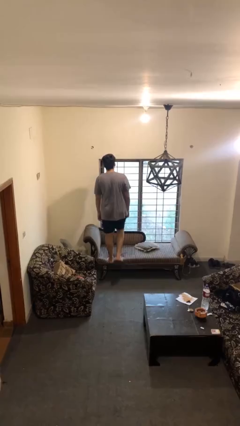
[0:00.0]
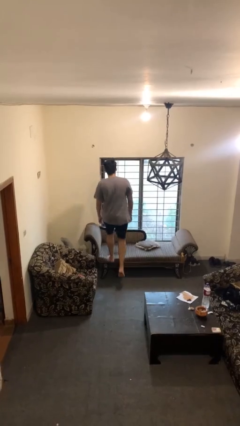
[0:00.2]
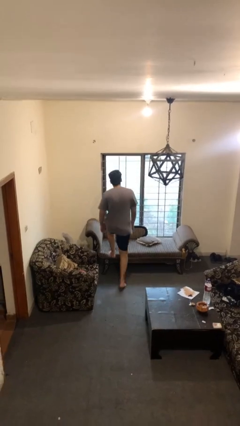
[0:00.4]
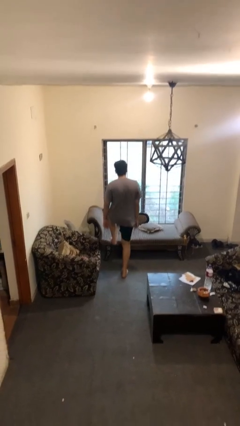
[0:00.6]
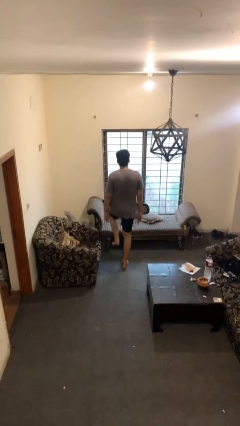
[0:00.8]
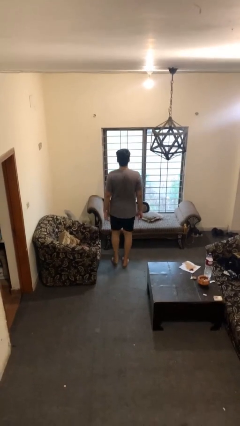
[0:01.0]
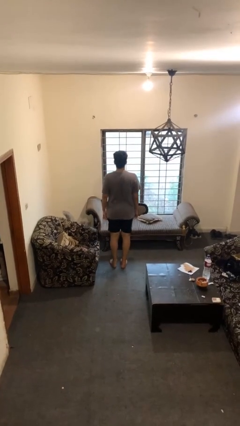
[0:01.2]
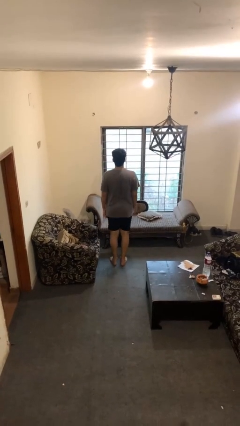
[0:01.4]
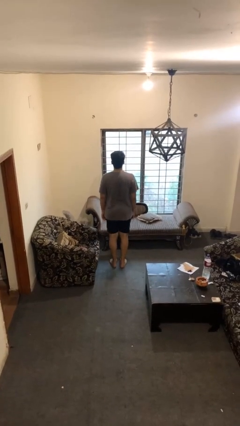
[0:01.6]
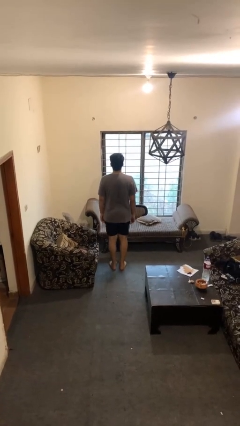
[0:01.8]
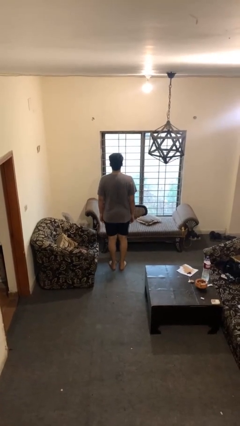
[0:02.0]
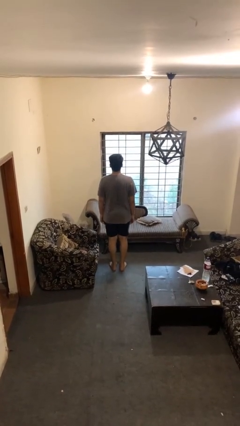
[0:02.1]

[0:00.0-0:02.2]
person climbs off couch

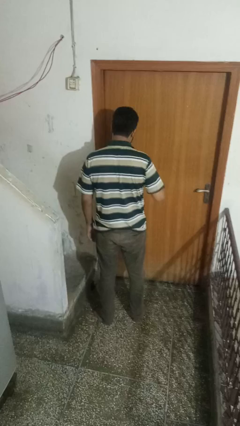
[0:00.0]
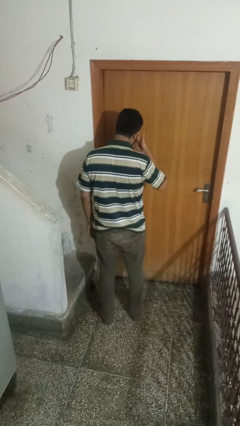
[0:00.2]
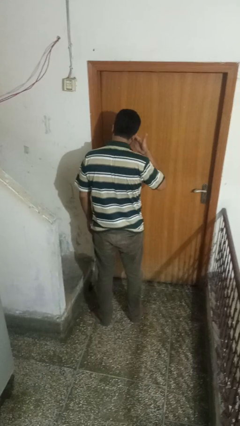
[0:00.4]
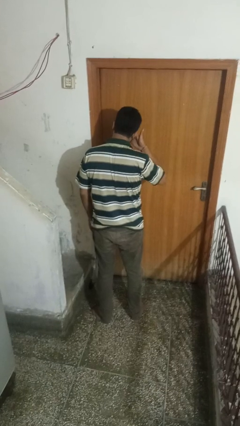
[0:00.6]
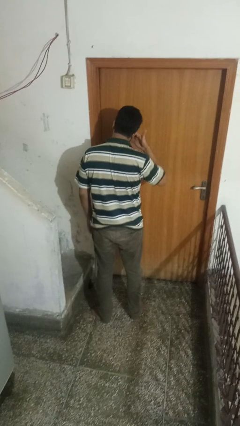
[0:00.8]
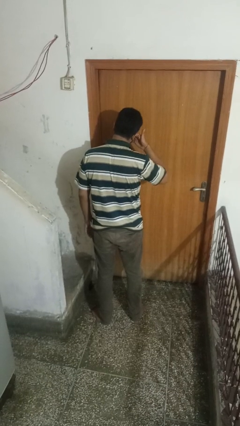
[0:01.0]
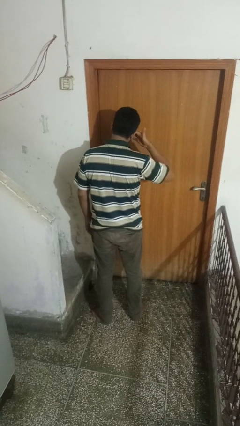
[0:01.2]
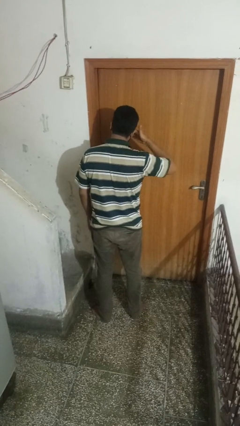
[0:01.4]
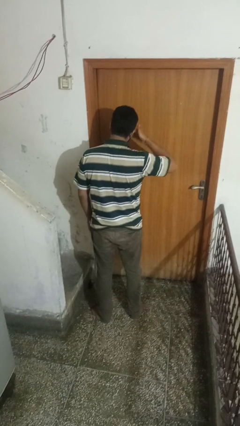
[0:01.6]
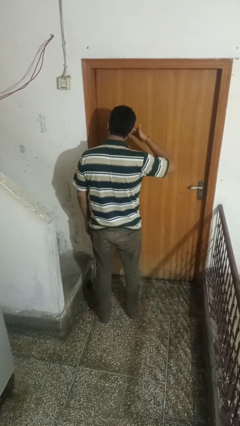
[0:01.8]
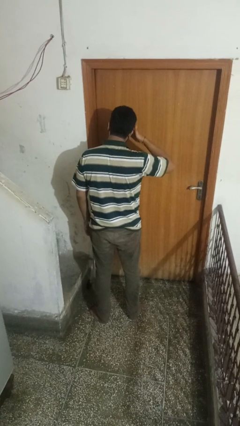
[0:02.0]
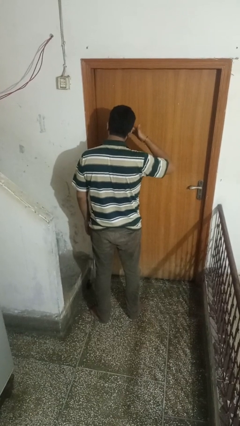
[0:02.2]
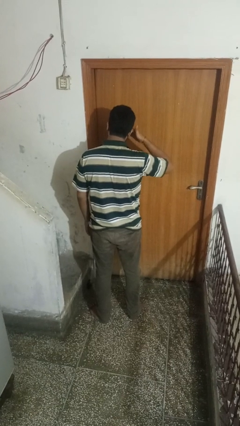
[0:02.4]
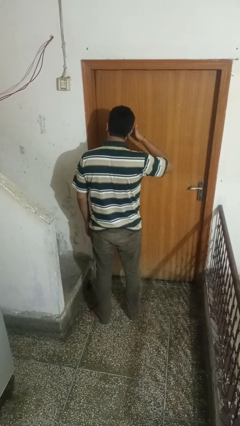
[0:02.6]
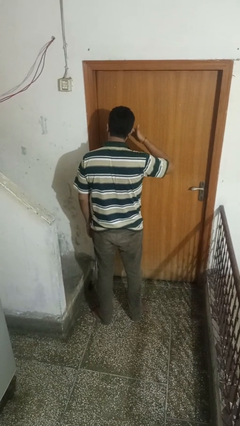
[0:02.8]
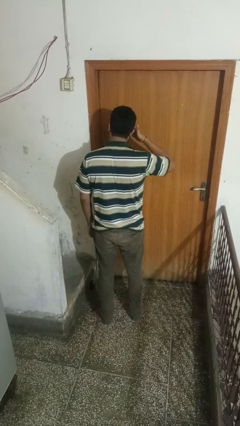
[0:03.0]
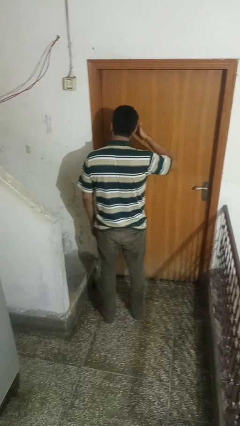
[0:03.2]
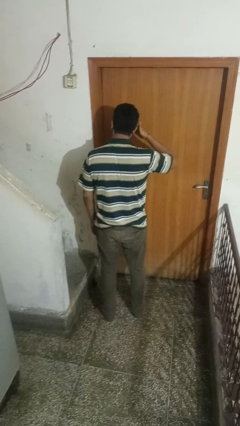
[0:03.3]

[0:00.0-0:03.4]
person rubs eyes

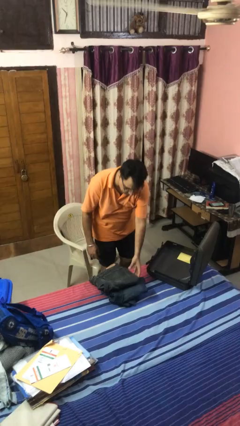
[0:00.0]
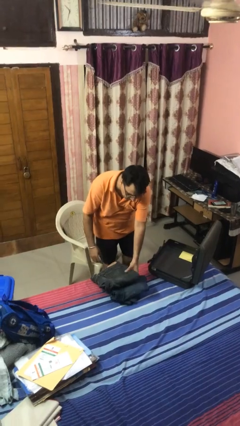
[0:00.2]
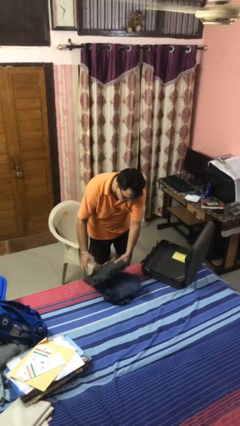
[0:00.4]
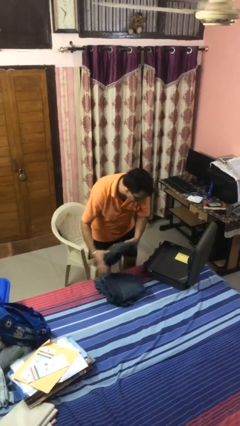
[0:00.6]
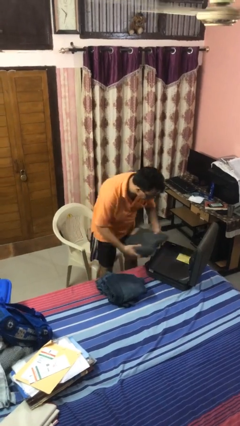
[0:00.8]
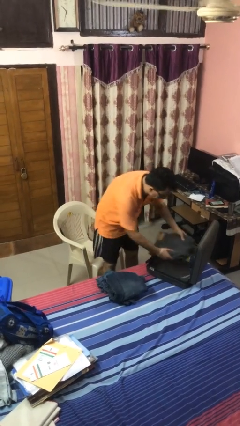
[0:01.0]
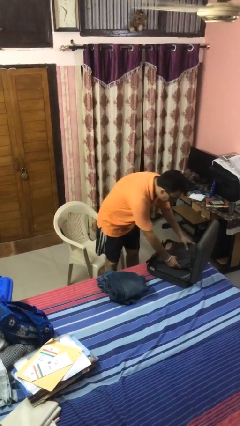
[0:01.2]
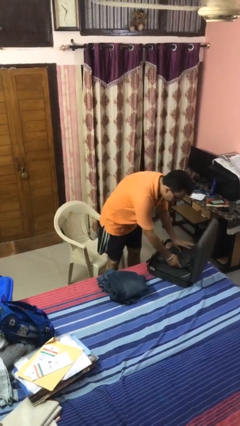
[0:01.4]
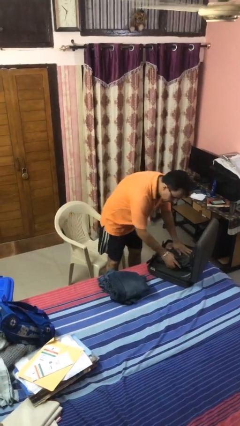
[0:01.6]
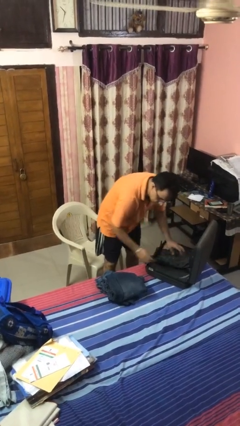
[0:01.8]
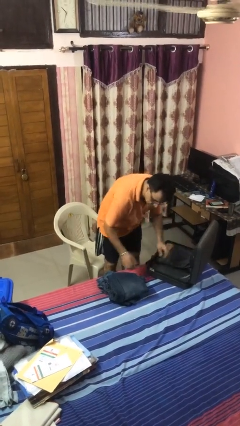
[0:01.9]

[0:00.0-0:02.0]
person loads clothes into suitcase

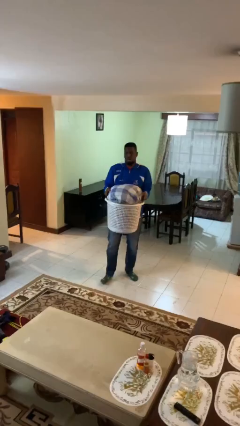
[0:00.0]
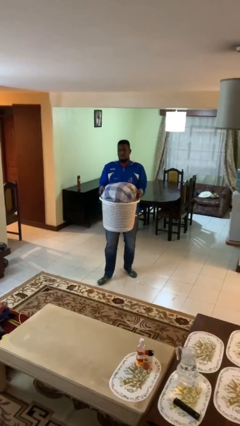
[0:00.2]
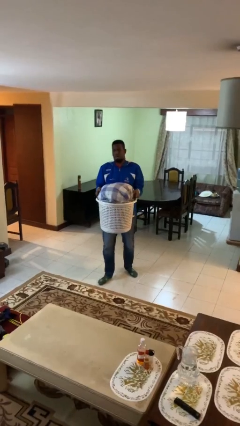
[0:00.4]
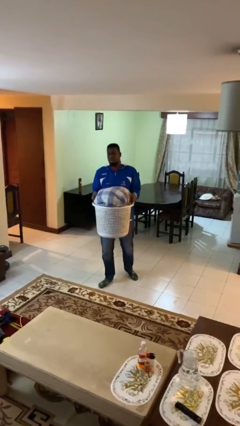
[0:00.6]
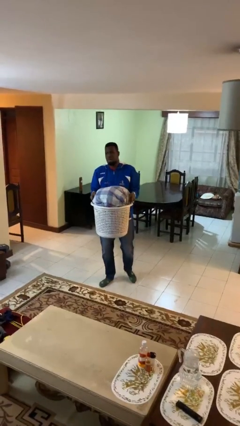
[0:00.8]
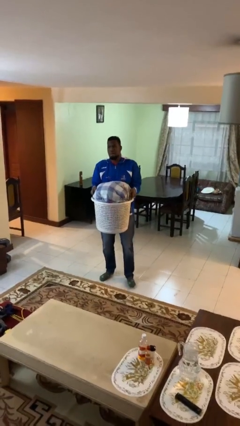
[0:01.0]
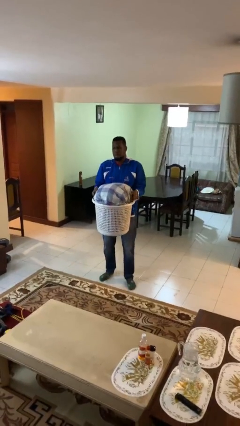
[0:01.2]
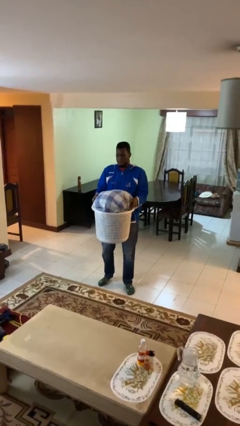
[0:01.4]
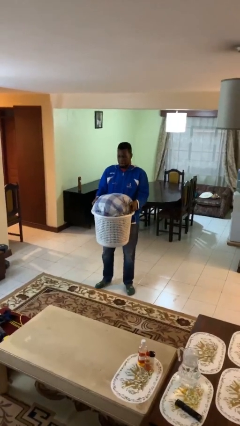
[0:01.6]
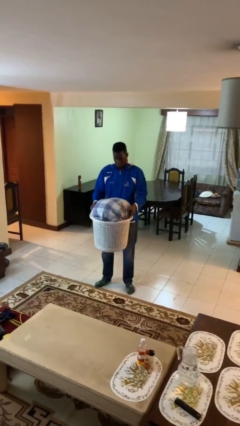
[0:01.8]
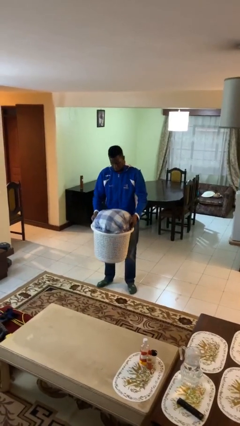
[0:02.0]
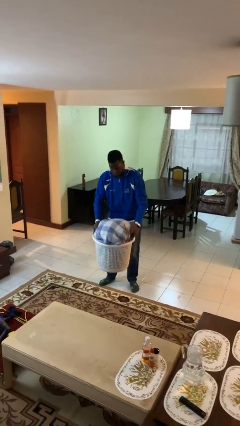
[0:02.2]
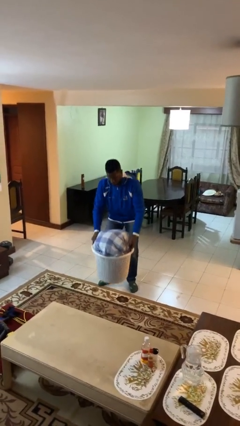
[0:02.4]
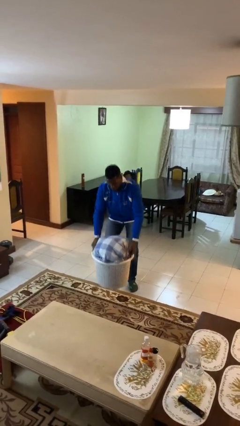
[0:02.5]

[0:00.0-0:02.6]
person puts down object on floor

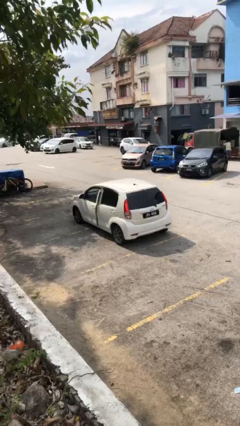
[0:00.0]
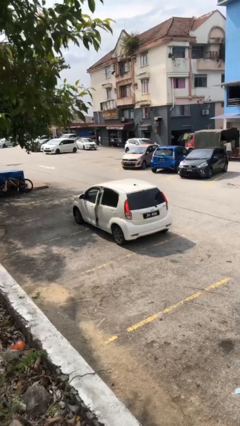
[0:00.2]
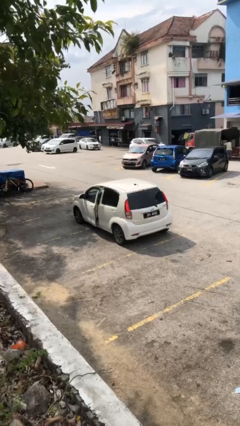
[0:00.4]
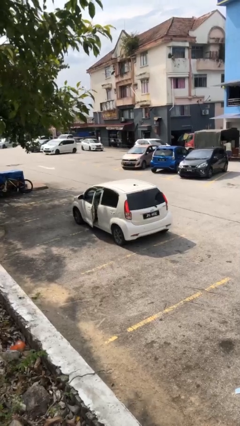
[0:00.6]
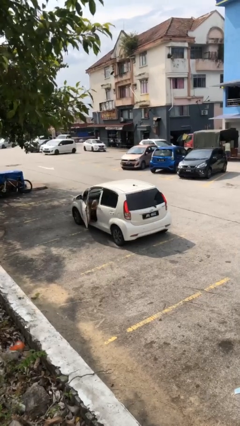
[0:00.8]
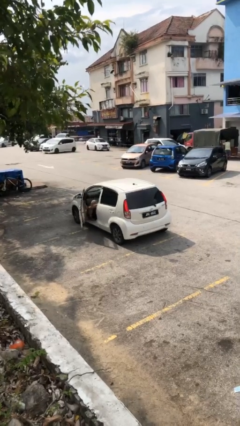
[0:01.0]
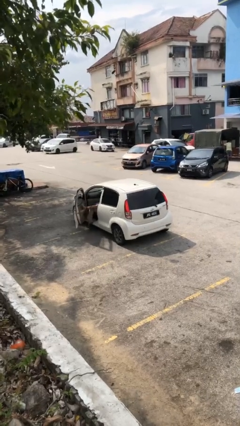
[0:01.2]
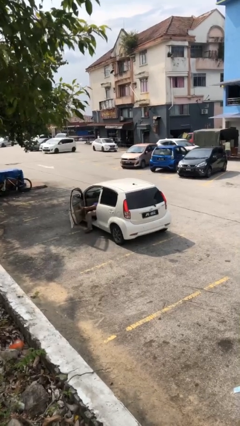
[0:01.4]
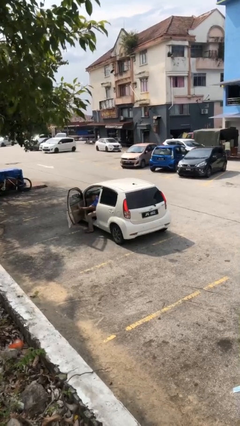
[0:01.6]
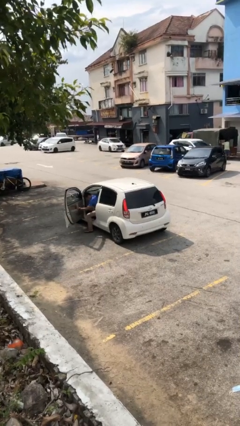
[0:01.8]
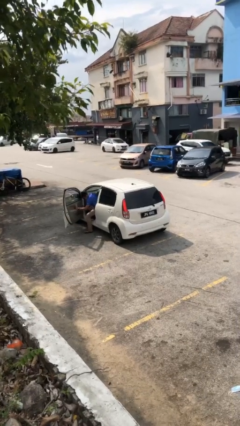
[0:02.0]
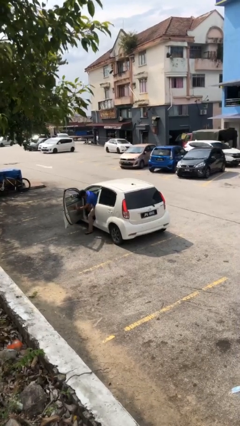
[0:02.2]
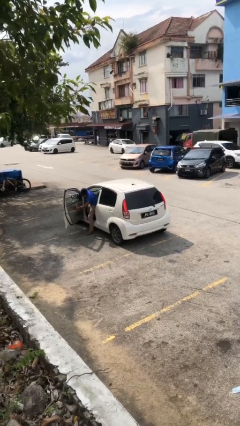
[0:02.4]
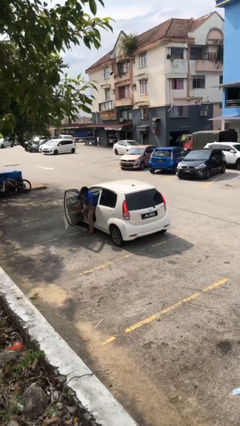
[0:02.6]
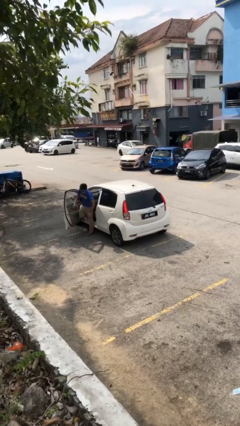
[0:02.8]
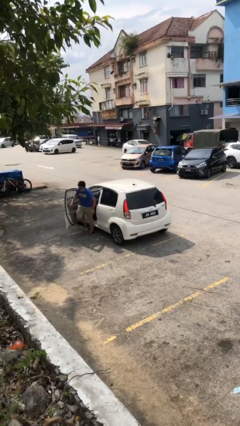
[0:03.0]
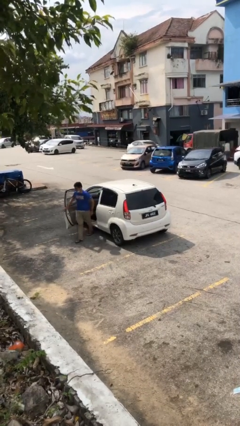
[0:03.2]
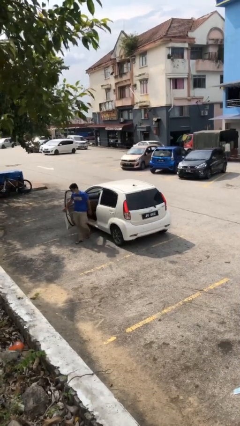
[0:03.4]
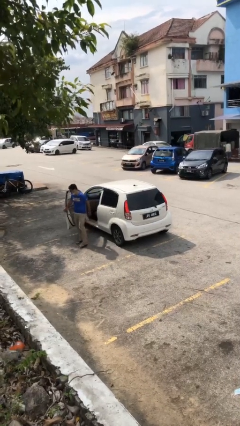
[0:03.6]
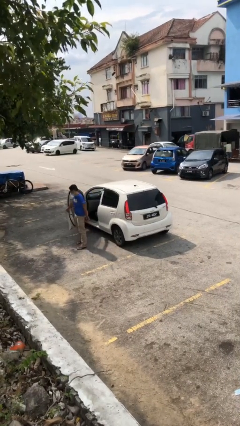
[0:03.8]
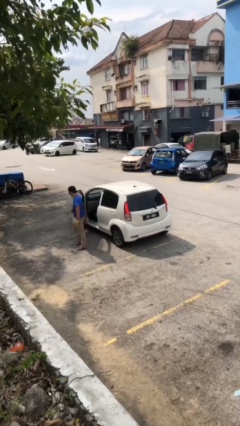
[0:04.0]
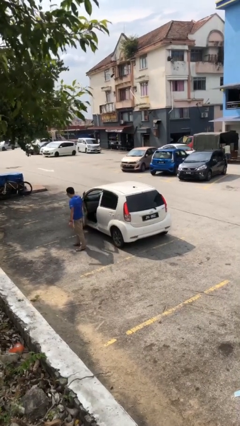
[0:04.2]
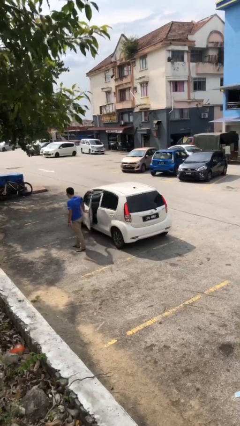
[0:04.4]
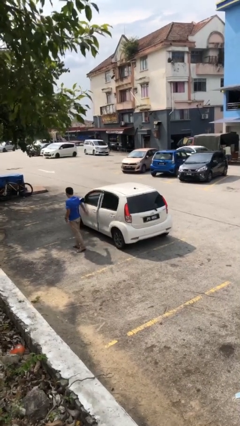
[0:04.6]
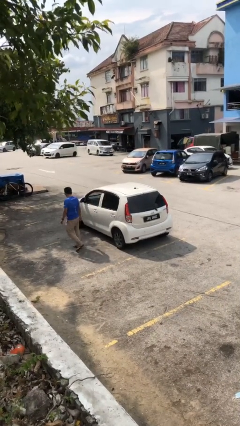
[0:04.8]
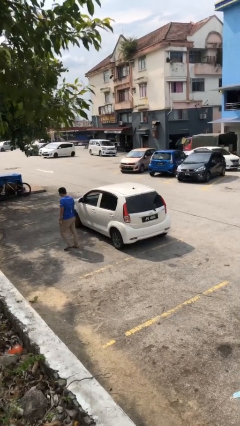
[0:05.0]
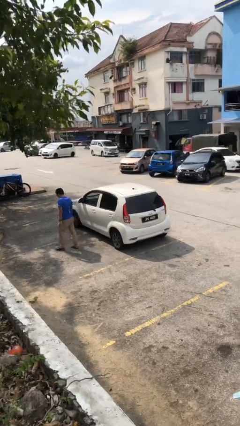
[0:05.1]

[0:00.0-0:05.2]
car drops off person

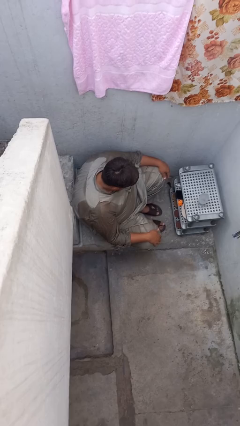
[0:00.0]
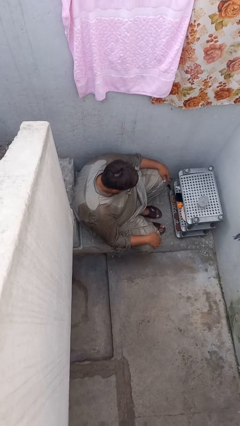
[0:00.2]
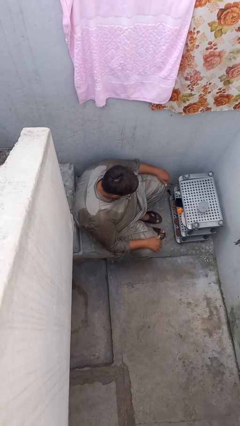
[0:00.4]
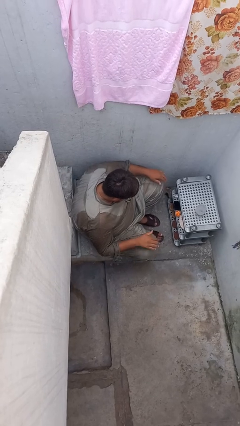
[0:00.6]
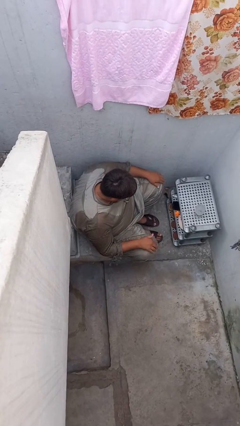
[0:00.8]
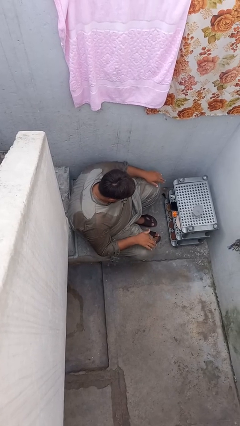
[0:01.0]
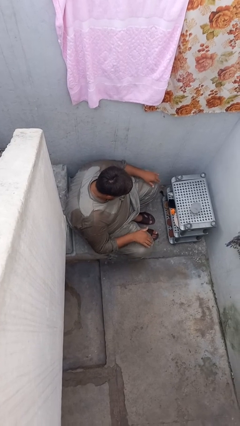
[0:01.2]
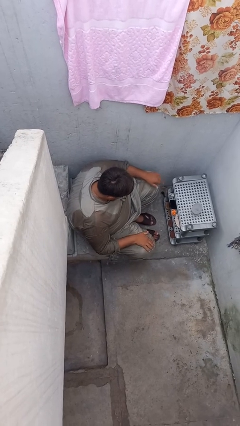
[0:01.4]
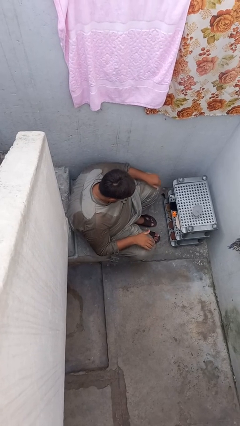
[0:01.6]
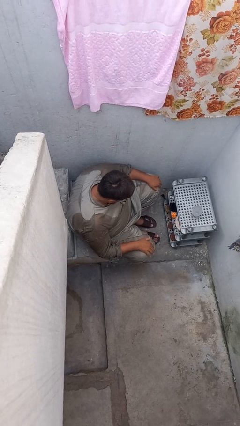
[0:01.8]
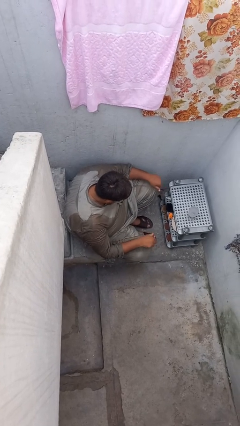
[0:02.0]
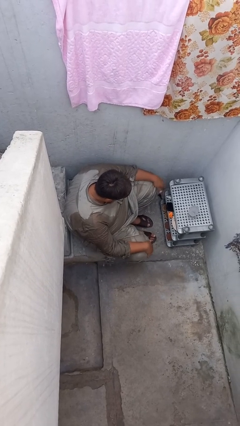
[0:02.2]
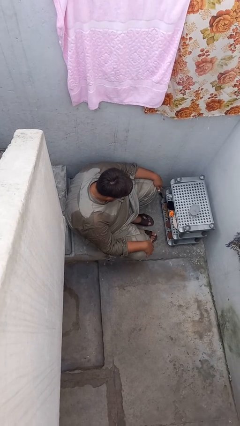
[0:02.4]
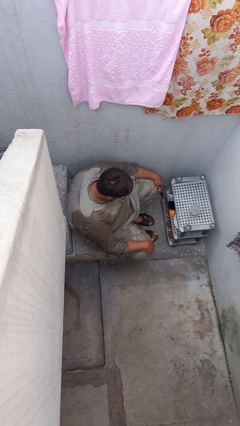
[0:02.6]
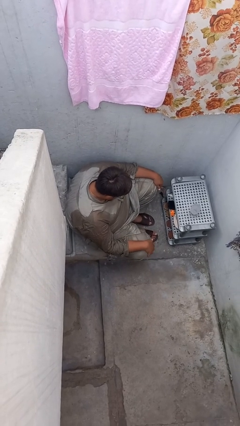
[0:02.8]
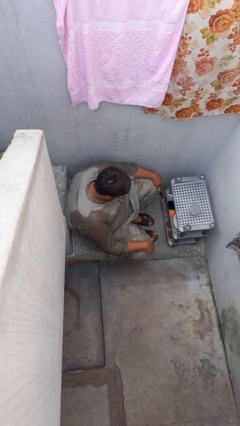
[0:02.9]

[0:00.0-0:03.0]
person slaps hands on thighs
